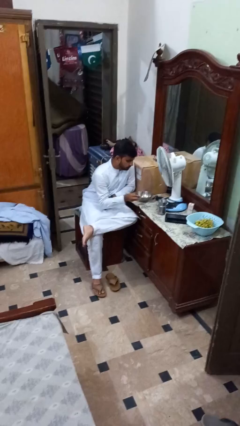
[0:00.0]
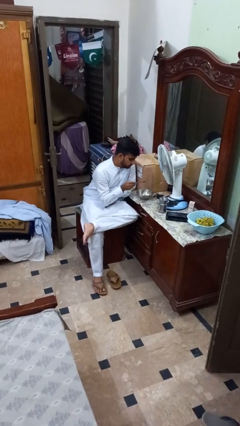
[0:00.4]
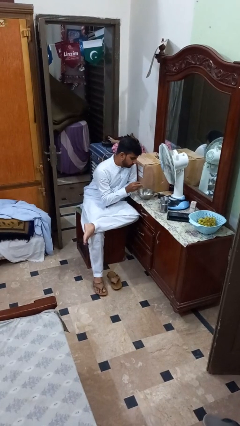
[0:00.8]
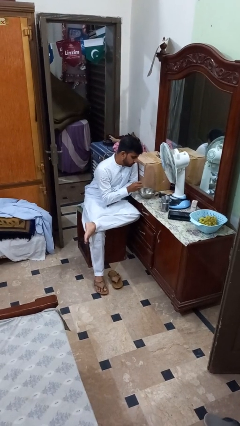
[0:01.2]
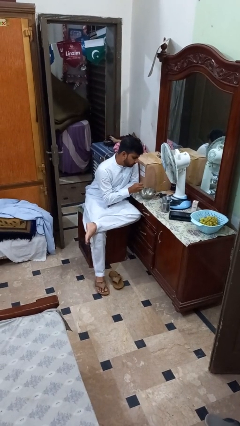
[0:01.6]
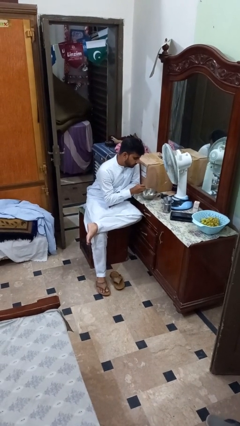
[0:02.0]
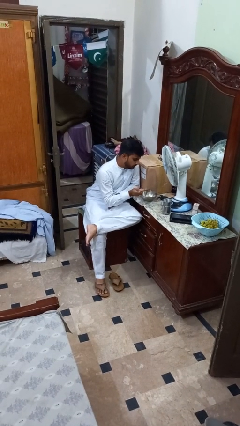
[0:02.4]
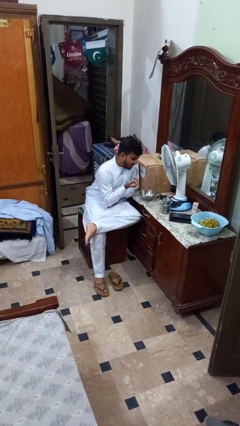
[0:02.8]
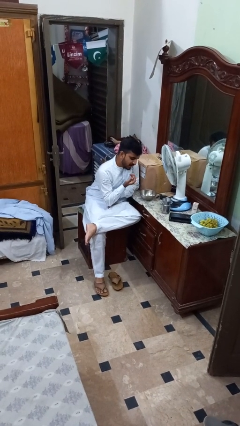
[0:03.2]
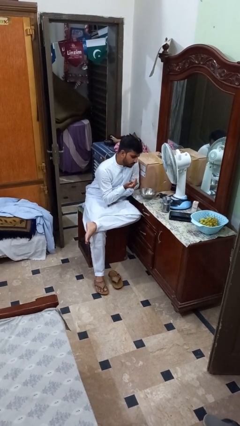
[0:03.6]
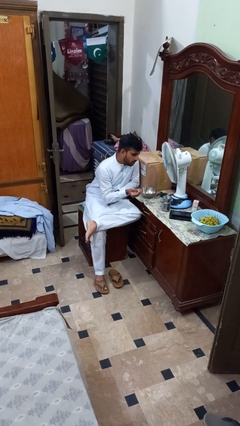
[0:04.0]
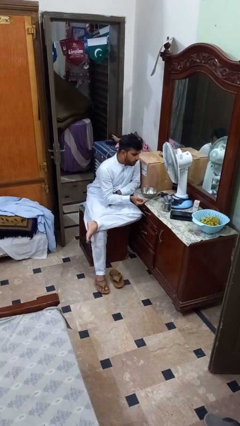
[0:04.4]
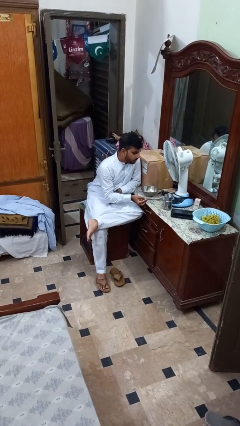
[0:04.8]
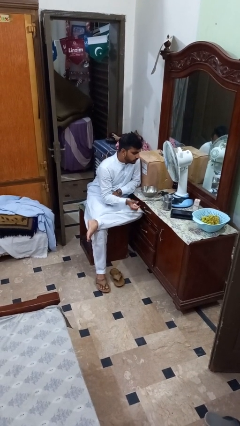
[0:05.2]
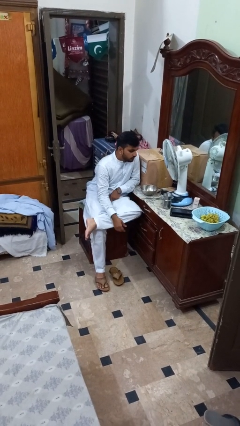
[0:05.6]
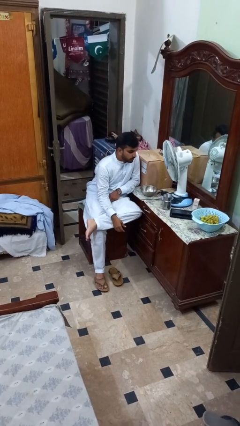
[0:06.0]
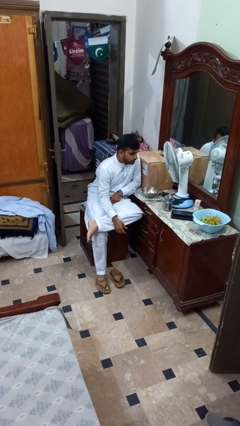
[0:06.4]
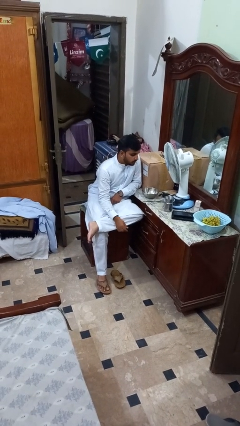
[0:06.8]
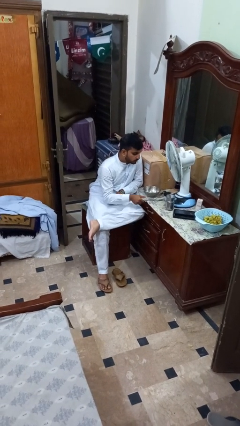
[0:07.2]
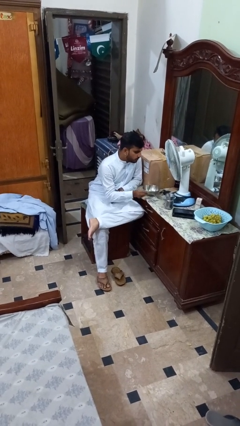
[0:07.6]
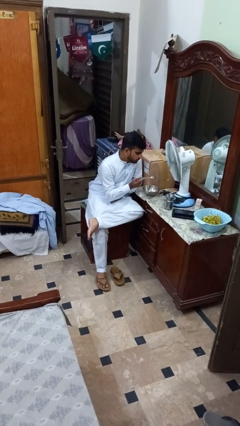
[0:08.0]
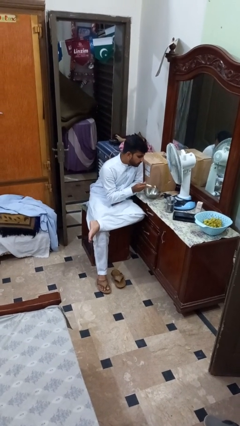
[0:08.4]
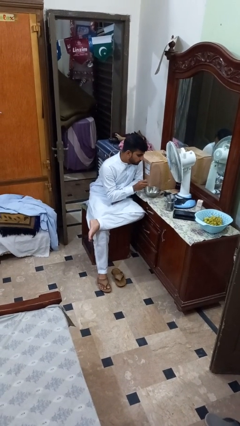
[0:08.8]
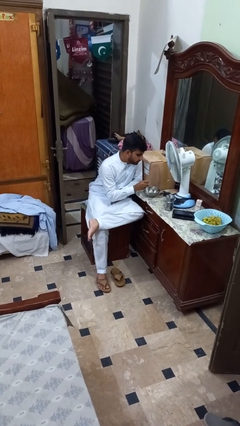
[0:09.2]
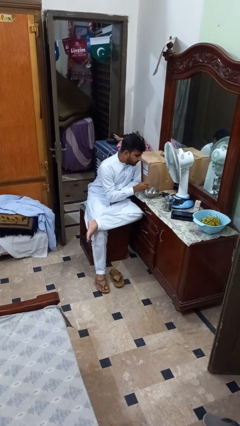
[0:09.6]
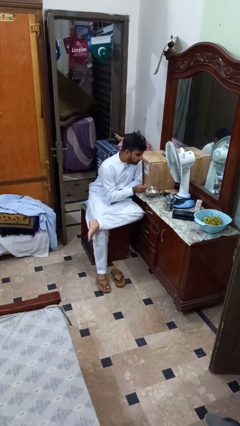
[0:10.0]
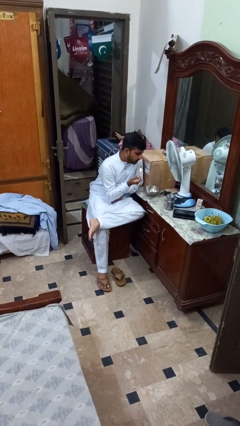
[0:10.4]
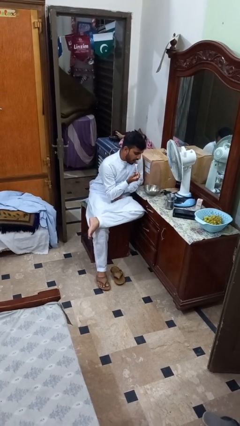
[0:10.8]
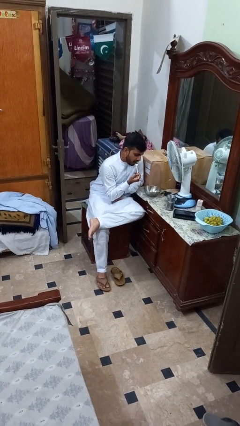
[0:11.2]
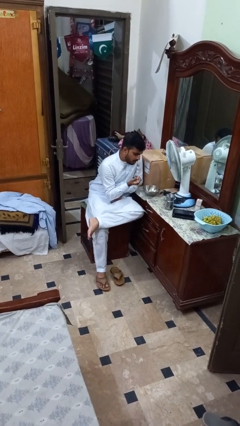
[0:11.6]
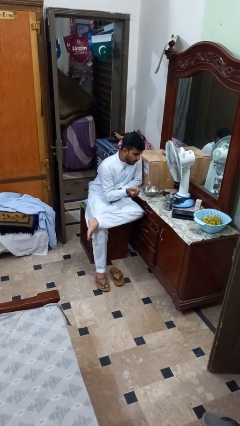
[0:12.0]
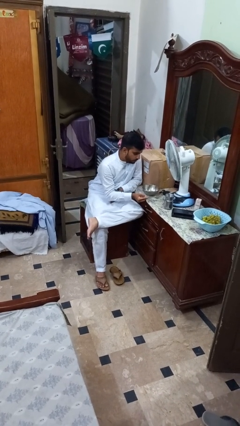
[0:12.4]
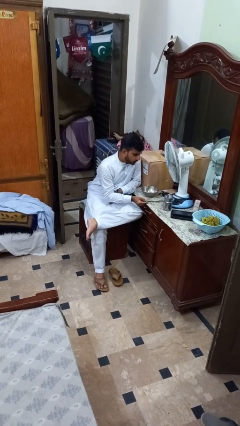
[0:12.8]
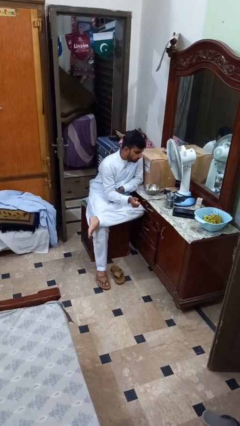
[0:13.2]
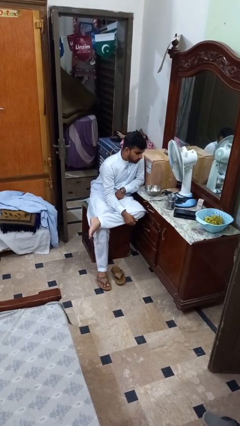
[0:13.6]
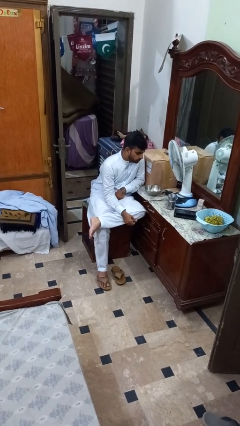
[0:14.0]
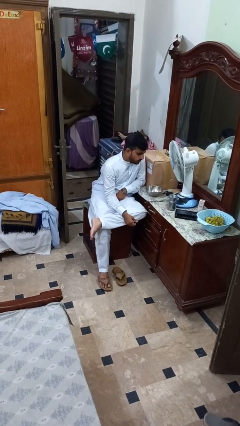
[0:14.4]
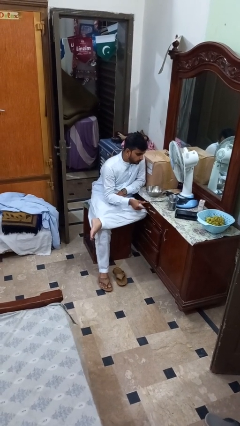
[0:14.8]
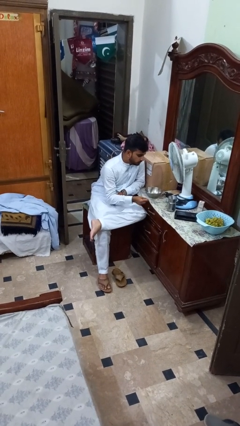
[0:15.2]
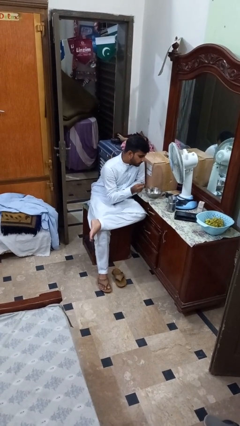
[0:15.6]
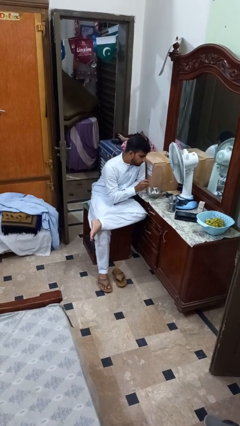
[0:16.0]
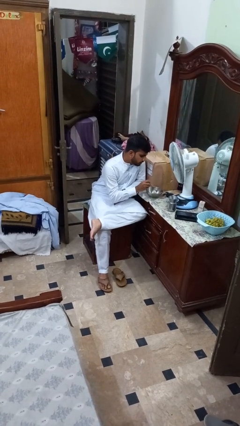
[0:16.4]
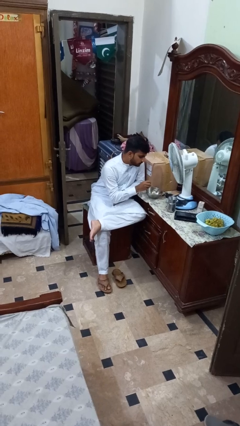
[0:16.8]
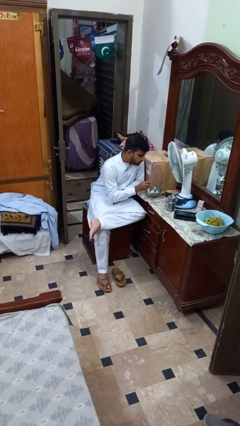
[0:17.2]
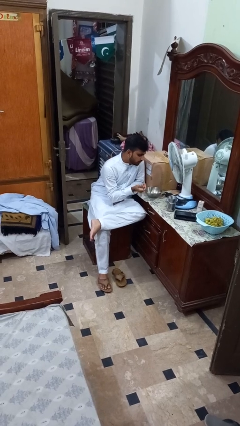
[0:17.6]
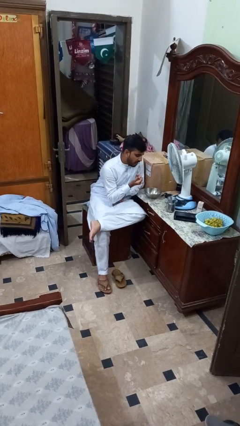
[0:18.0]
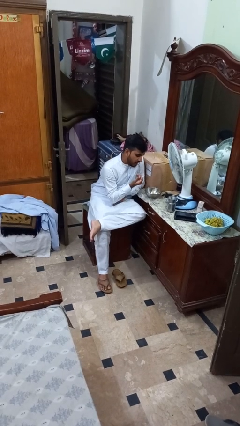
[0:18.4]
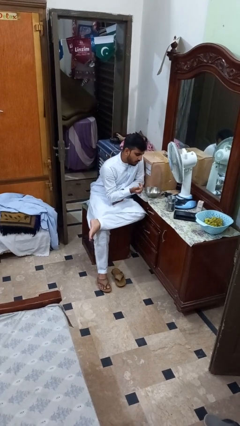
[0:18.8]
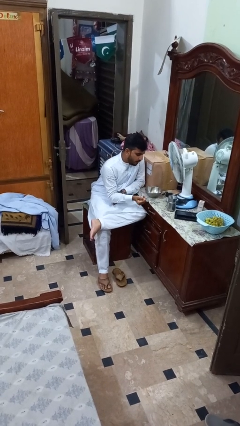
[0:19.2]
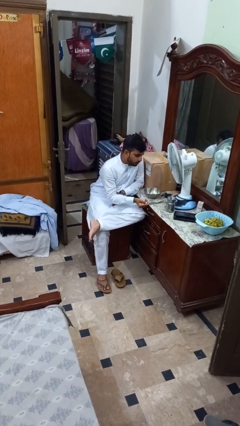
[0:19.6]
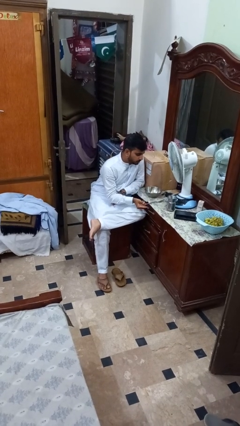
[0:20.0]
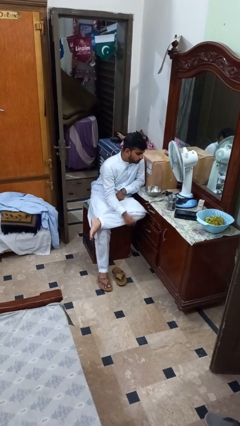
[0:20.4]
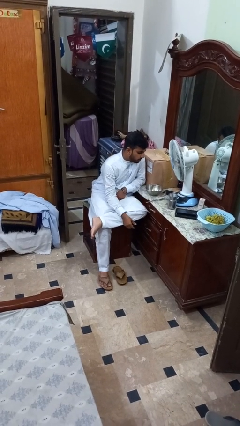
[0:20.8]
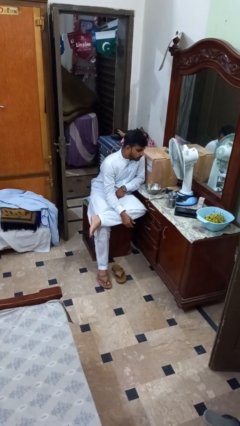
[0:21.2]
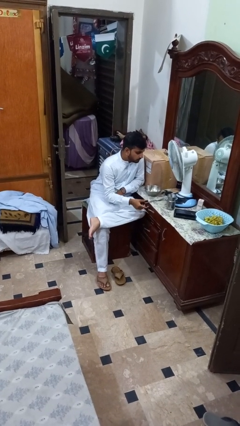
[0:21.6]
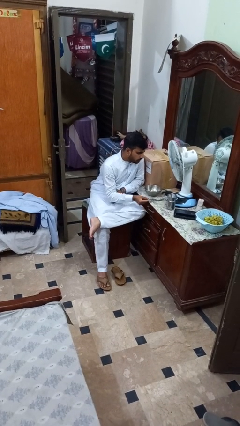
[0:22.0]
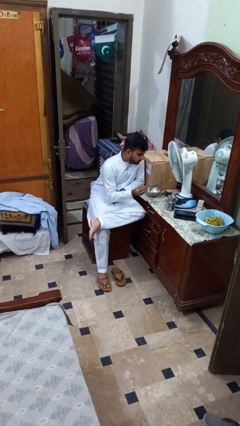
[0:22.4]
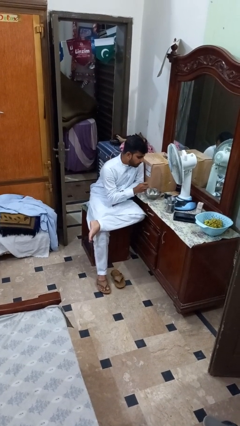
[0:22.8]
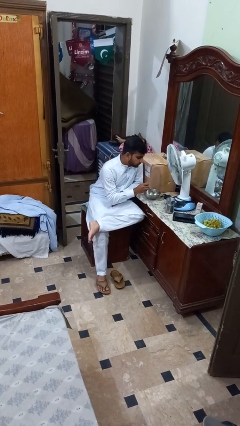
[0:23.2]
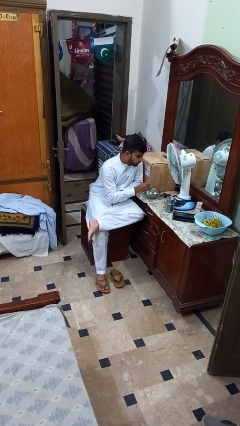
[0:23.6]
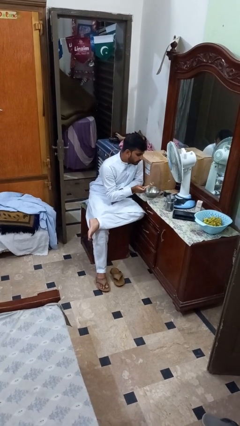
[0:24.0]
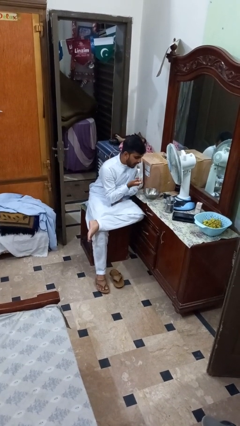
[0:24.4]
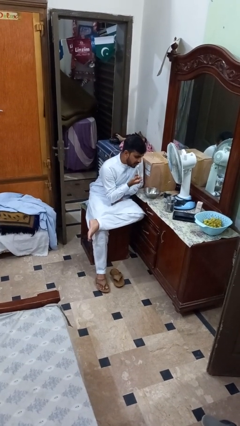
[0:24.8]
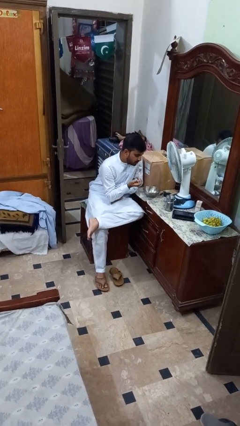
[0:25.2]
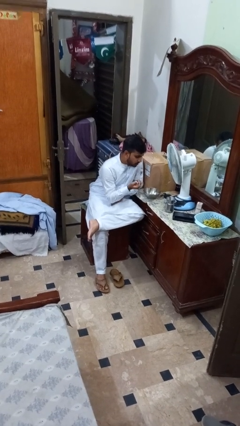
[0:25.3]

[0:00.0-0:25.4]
person eats with utensil

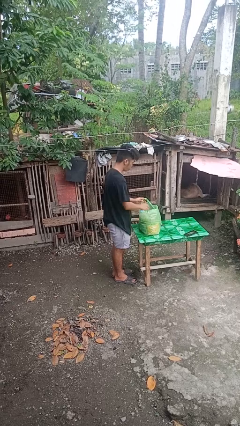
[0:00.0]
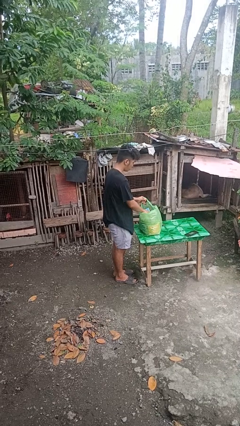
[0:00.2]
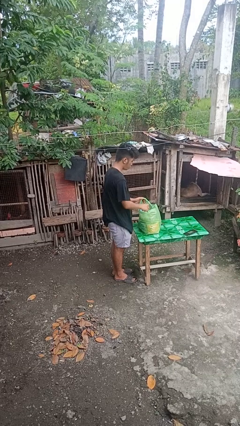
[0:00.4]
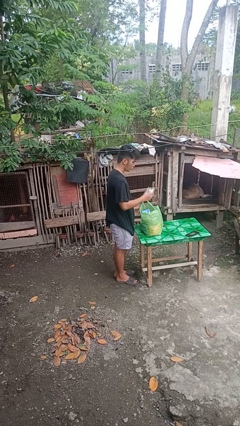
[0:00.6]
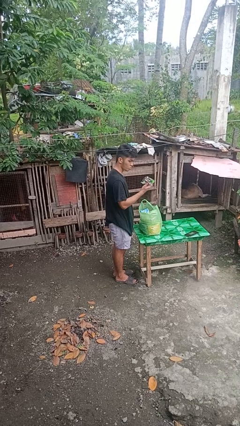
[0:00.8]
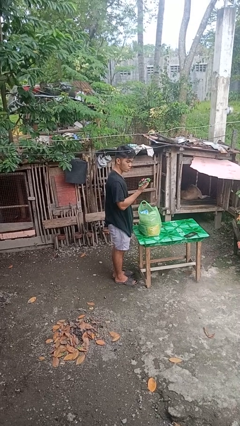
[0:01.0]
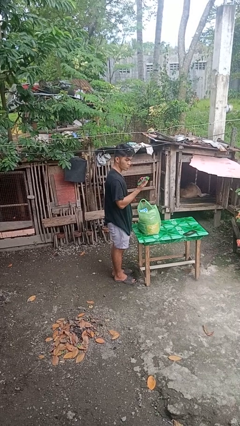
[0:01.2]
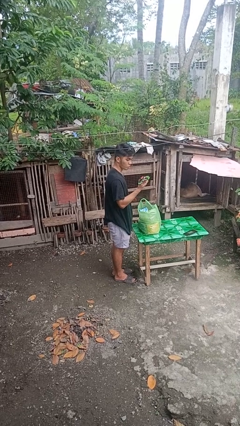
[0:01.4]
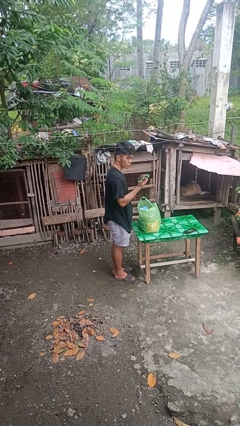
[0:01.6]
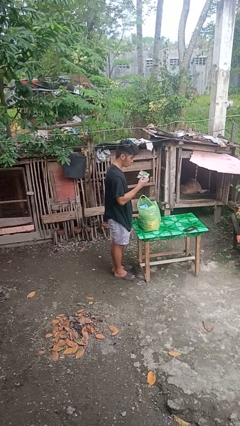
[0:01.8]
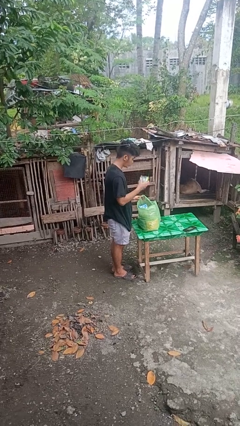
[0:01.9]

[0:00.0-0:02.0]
person takes object from bag

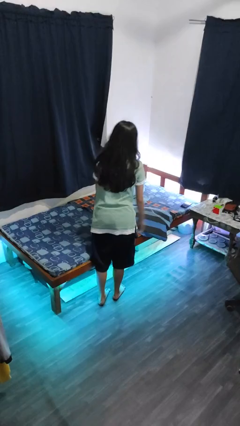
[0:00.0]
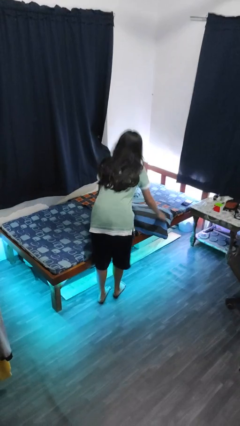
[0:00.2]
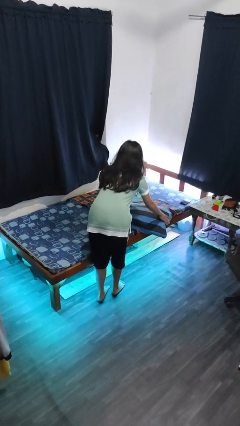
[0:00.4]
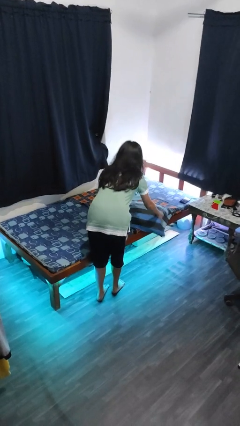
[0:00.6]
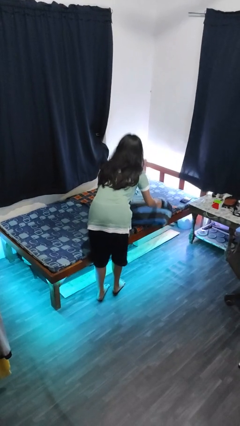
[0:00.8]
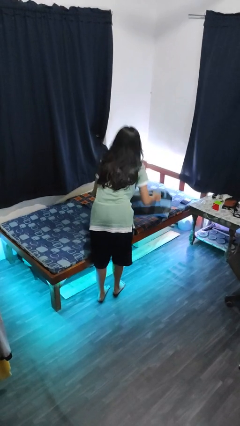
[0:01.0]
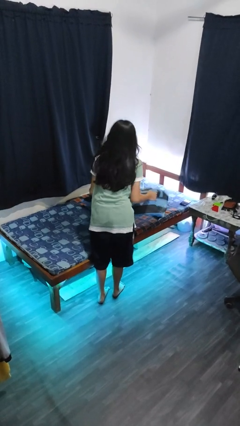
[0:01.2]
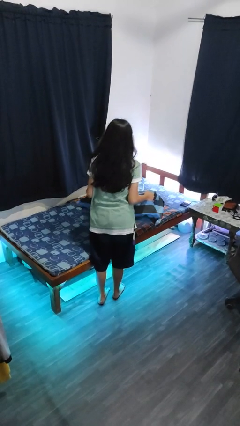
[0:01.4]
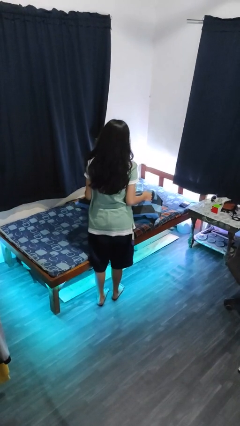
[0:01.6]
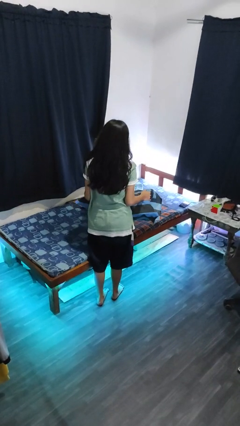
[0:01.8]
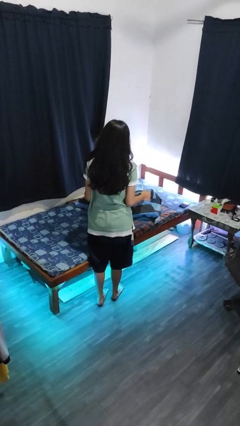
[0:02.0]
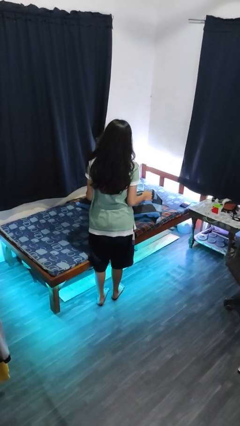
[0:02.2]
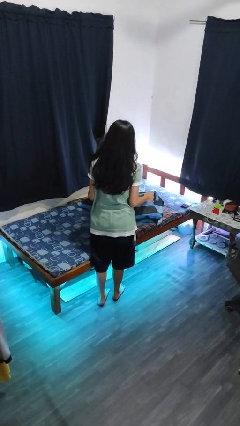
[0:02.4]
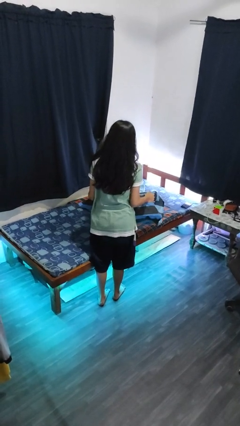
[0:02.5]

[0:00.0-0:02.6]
person picks up object from bed

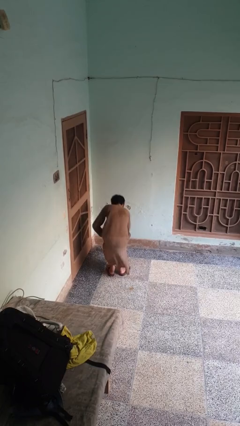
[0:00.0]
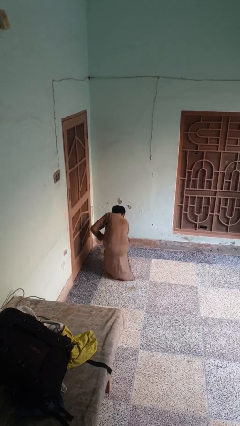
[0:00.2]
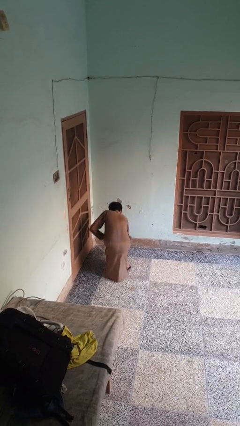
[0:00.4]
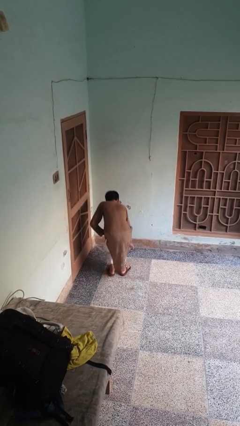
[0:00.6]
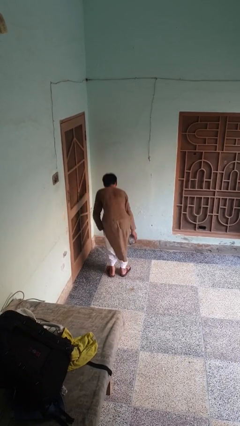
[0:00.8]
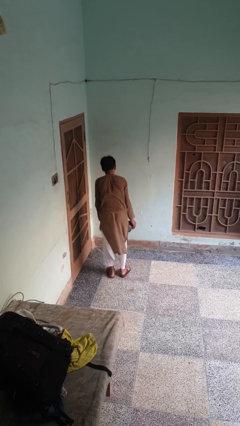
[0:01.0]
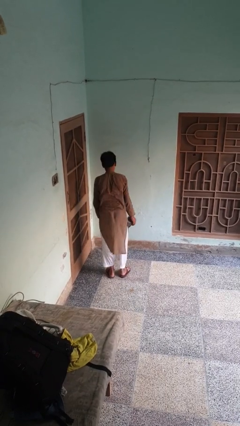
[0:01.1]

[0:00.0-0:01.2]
person picks up object from floor
